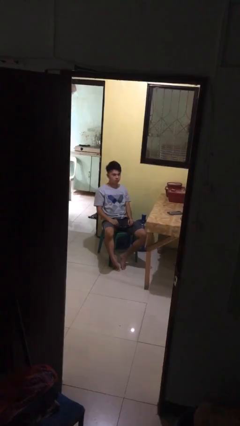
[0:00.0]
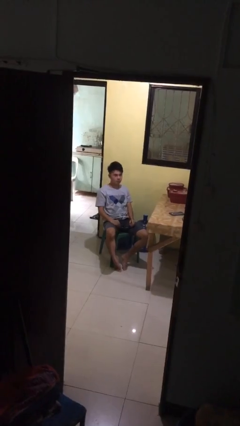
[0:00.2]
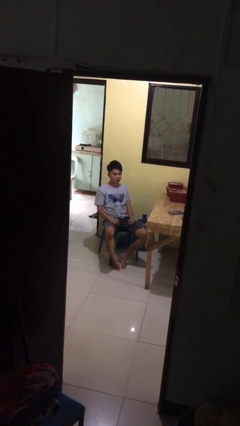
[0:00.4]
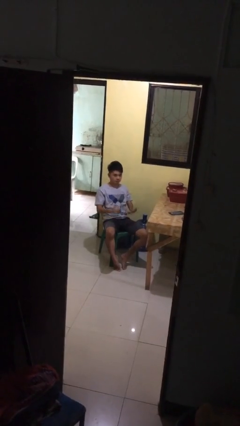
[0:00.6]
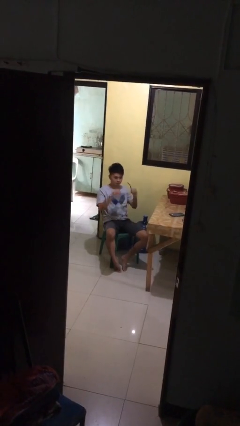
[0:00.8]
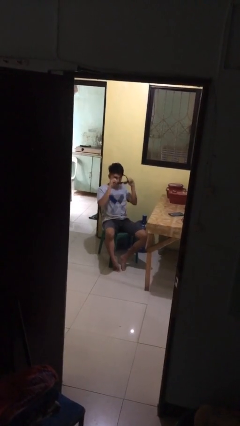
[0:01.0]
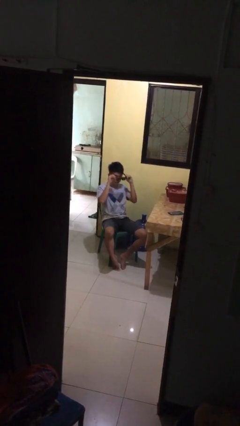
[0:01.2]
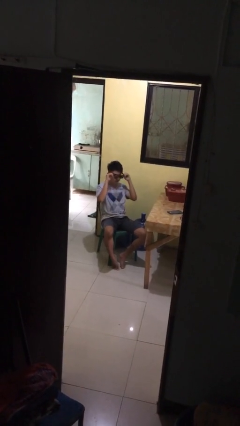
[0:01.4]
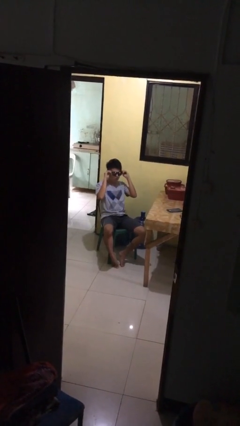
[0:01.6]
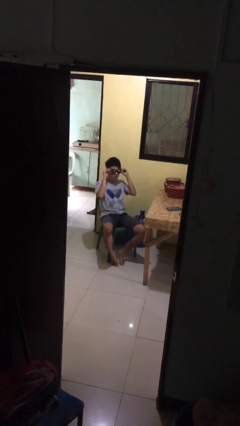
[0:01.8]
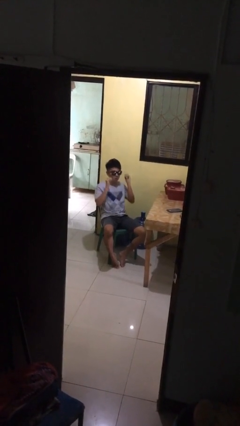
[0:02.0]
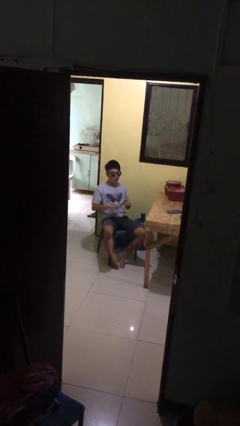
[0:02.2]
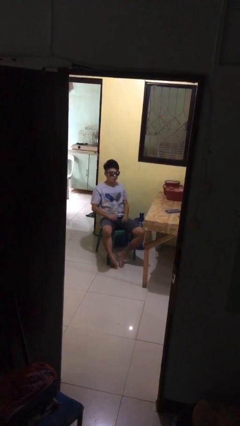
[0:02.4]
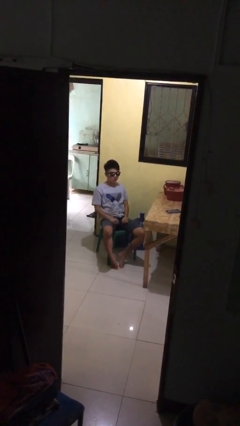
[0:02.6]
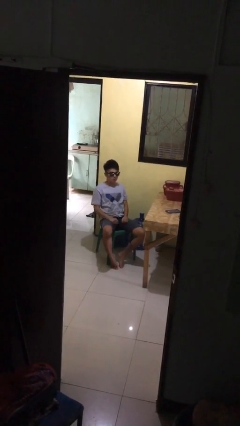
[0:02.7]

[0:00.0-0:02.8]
person puts on sunglasses

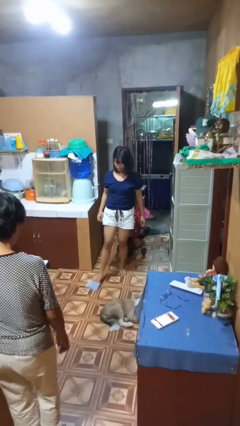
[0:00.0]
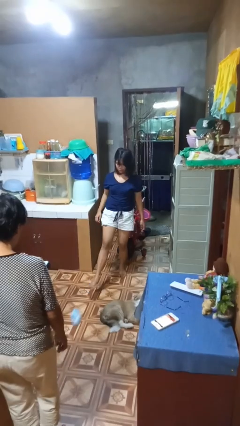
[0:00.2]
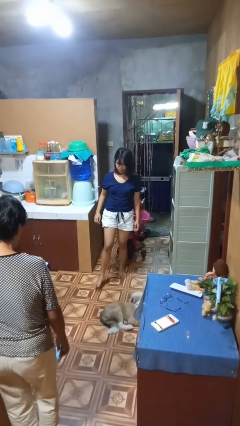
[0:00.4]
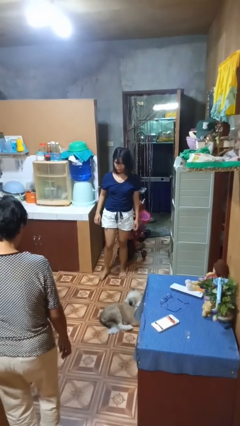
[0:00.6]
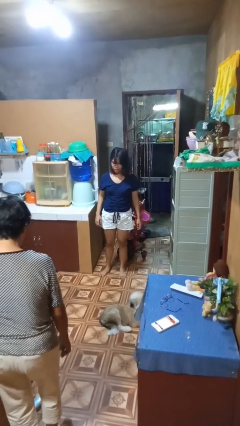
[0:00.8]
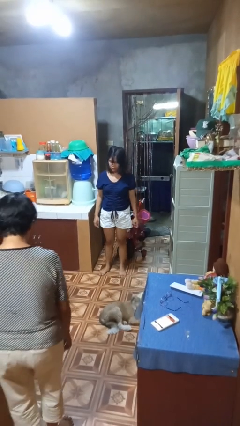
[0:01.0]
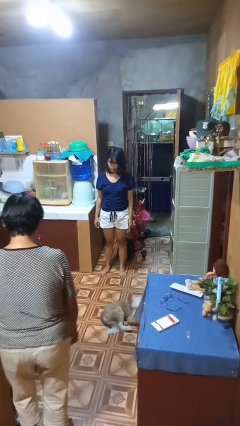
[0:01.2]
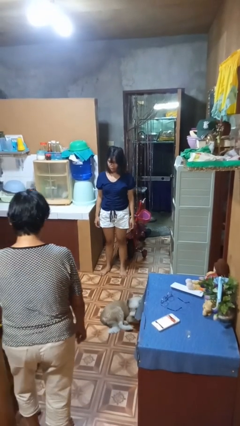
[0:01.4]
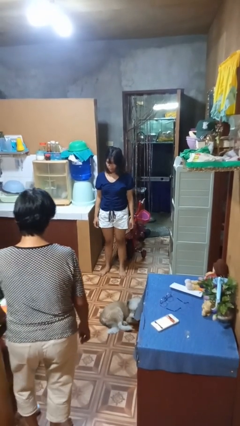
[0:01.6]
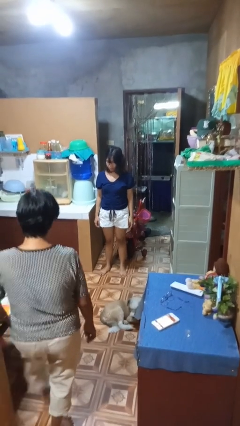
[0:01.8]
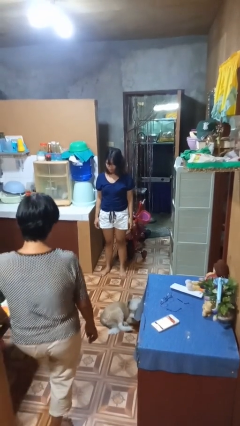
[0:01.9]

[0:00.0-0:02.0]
person kicks object to person

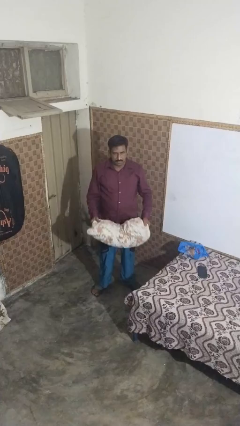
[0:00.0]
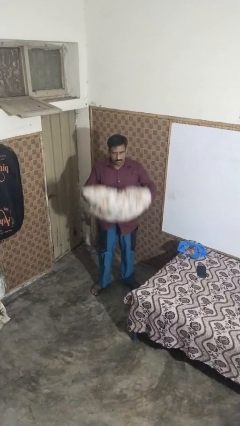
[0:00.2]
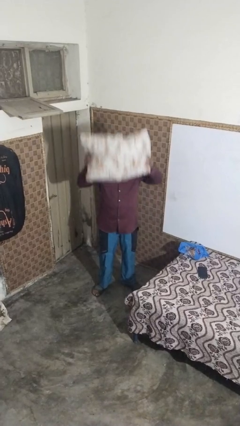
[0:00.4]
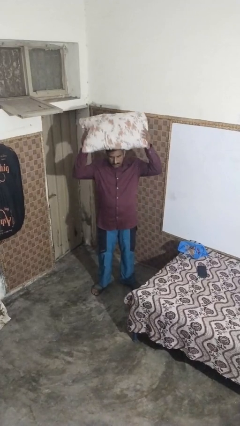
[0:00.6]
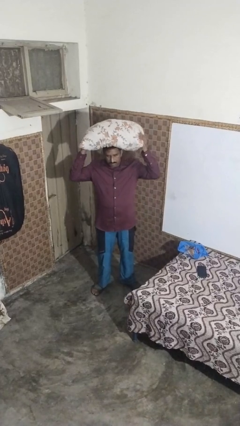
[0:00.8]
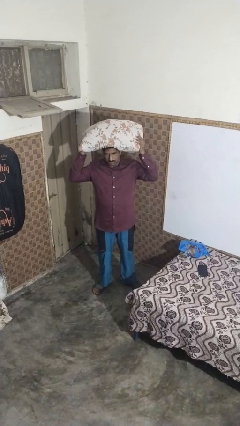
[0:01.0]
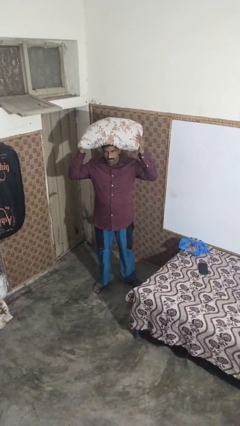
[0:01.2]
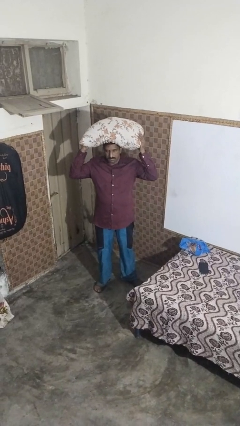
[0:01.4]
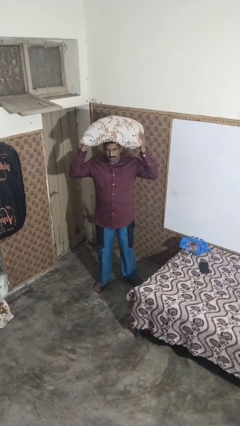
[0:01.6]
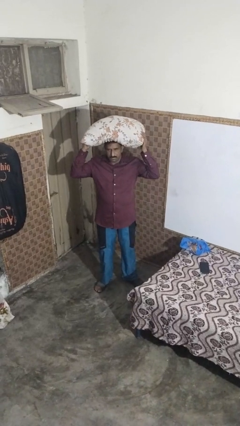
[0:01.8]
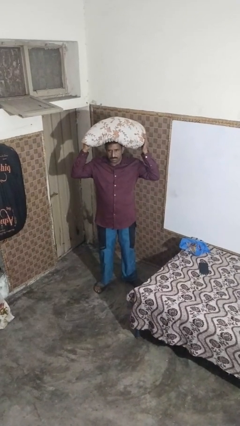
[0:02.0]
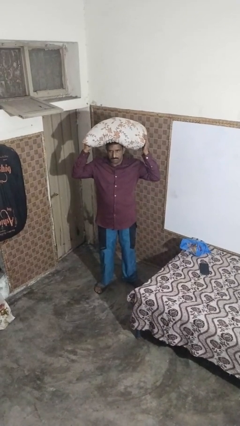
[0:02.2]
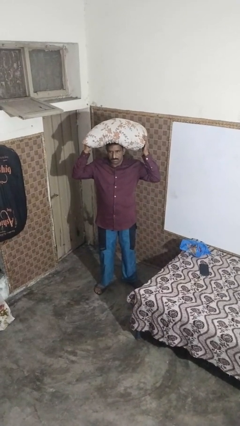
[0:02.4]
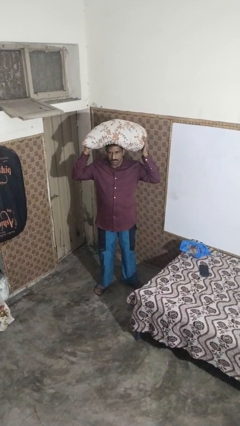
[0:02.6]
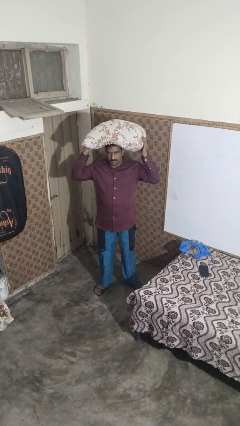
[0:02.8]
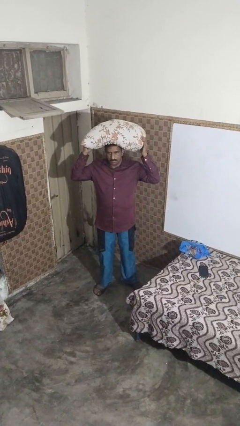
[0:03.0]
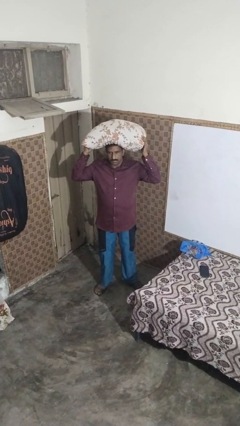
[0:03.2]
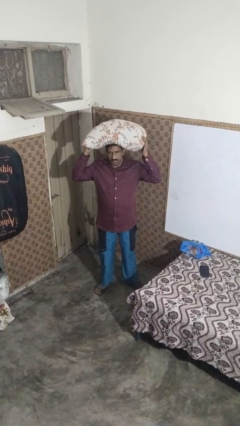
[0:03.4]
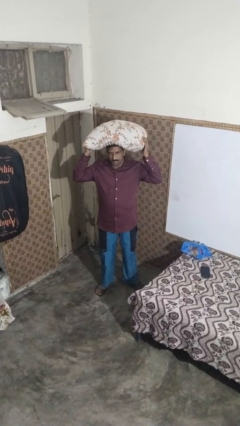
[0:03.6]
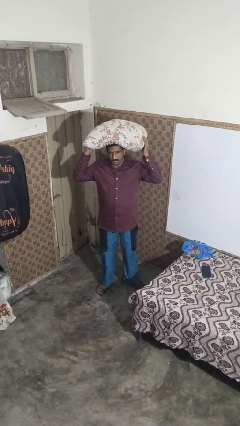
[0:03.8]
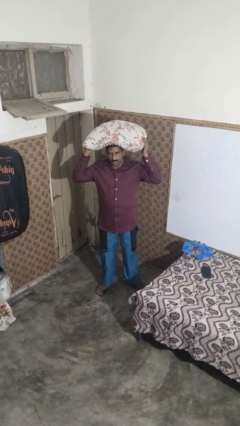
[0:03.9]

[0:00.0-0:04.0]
person holds object above head

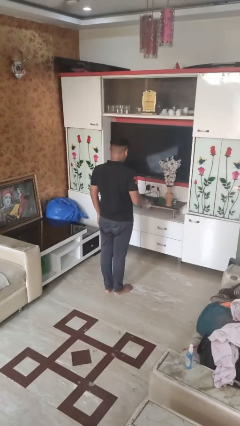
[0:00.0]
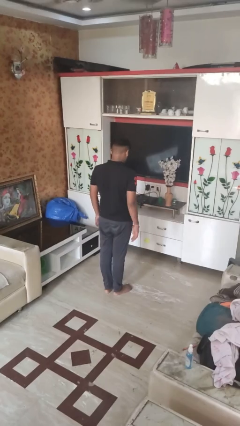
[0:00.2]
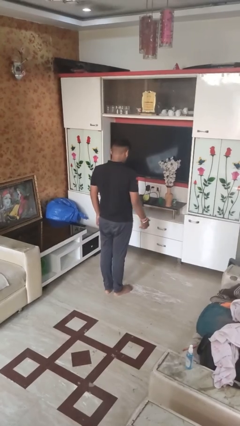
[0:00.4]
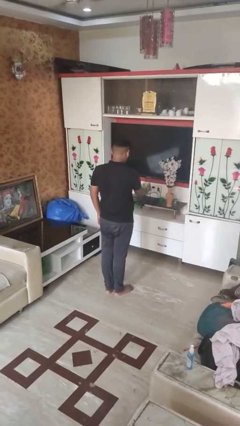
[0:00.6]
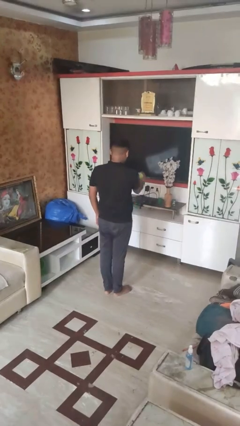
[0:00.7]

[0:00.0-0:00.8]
person bounces ball on floor

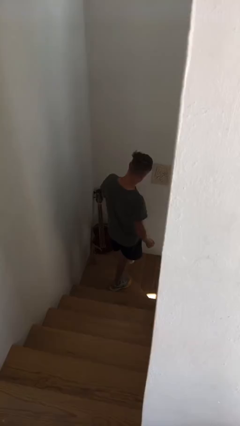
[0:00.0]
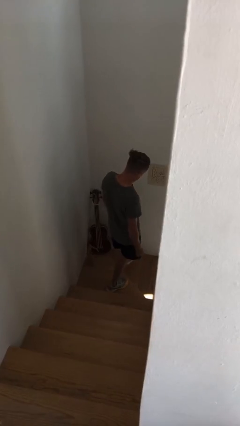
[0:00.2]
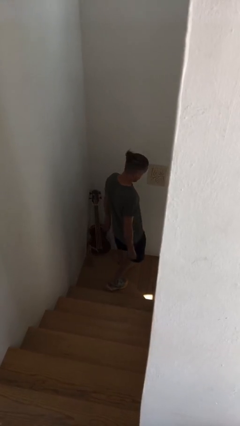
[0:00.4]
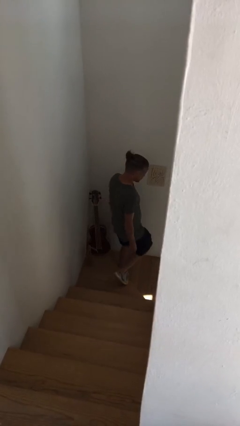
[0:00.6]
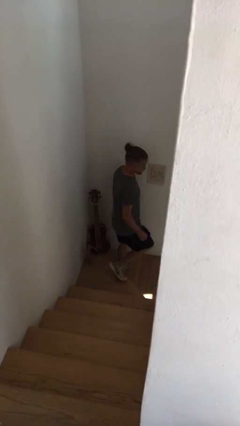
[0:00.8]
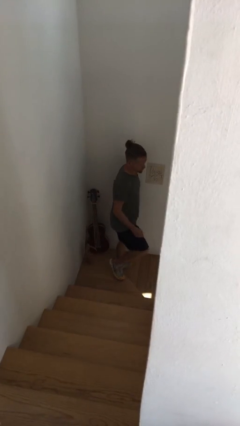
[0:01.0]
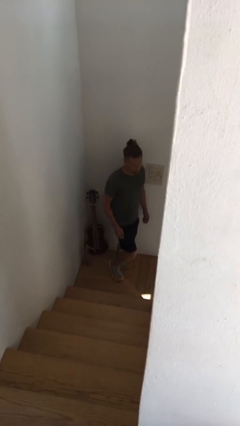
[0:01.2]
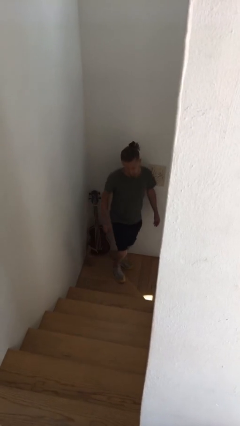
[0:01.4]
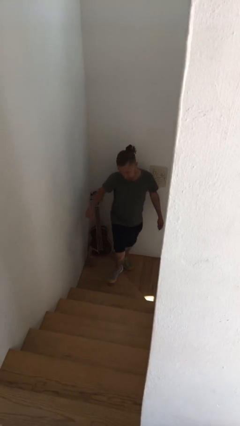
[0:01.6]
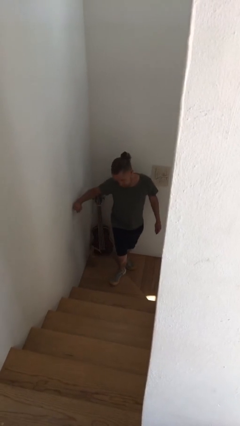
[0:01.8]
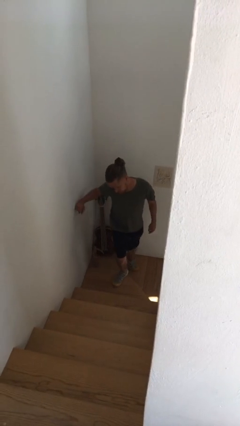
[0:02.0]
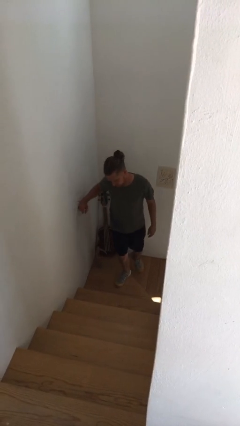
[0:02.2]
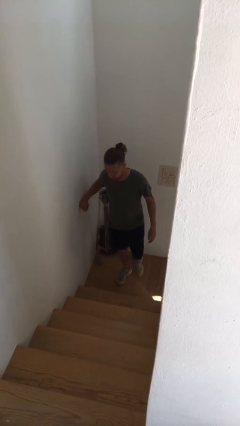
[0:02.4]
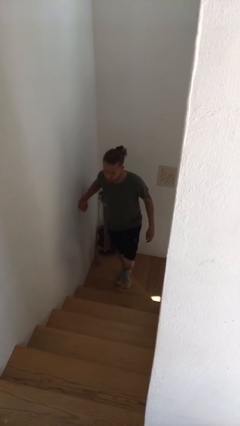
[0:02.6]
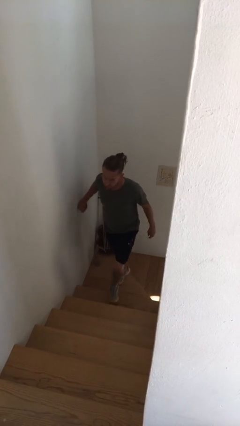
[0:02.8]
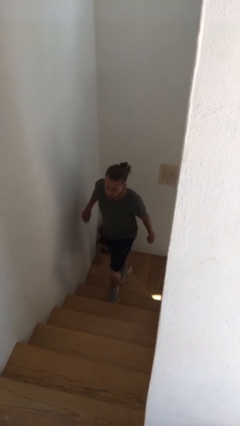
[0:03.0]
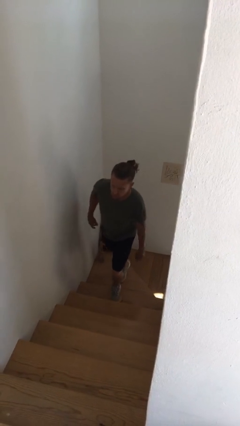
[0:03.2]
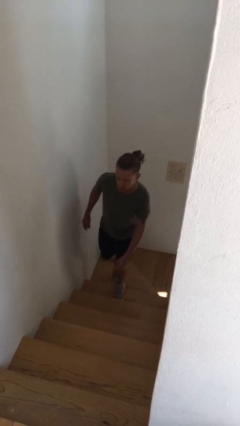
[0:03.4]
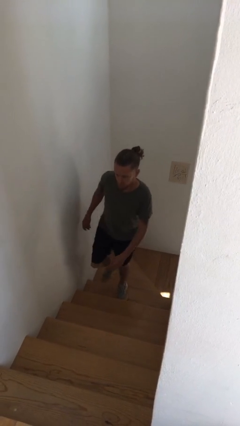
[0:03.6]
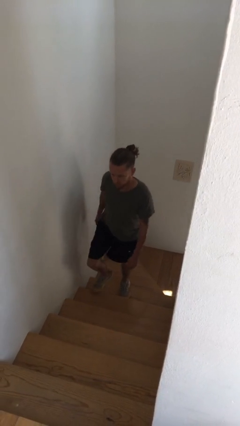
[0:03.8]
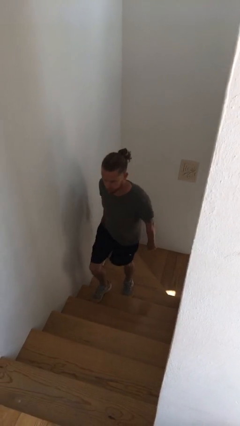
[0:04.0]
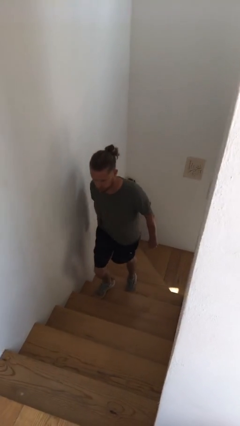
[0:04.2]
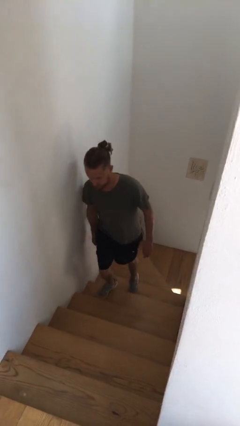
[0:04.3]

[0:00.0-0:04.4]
person climbs up stairs

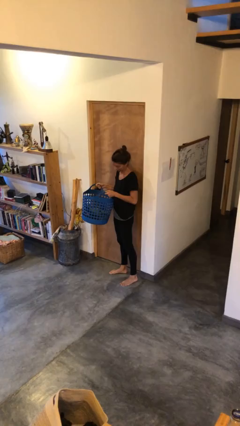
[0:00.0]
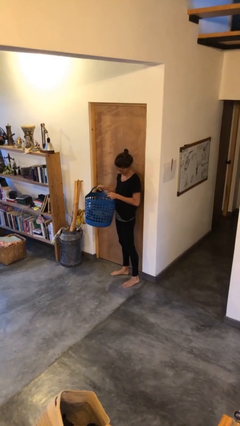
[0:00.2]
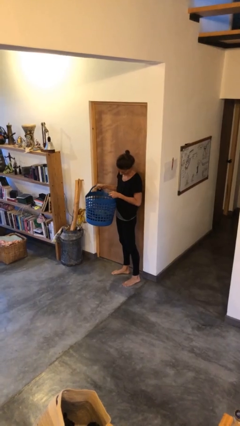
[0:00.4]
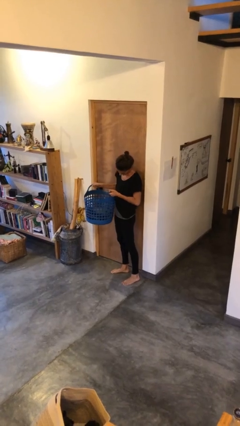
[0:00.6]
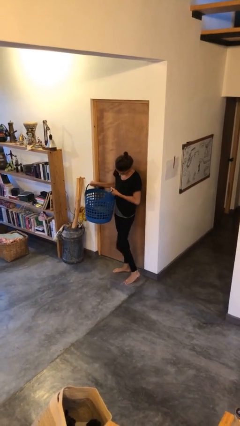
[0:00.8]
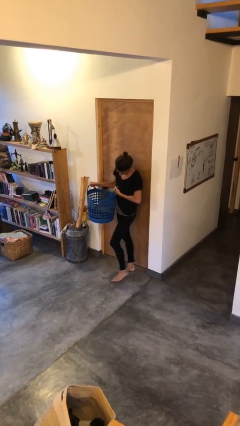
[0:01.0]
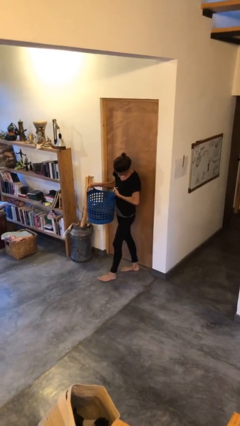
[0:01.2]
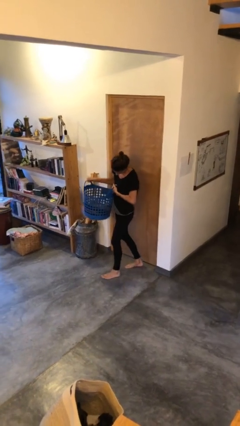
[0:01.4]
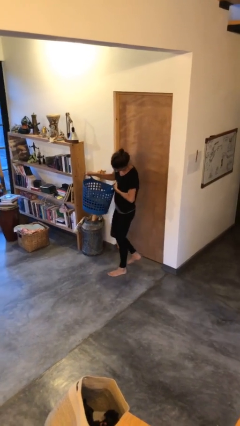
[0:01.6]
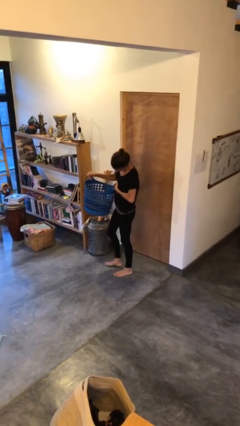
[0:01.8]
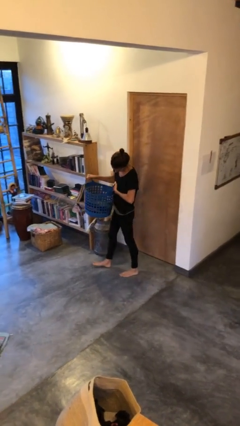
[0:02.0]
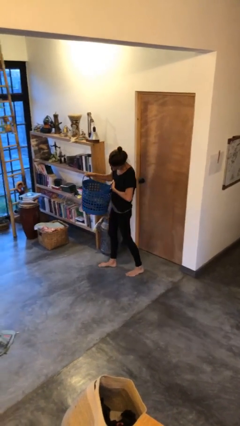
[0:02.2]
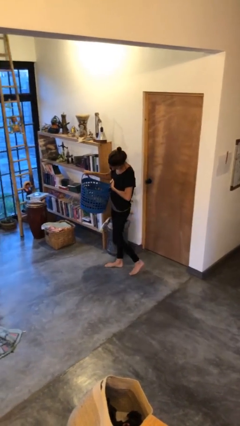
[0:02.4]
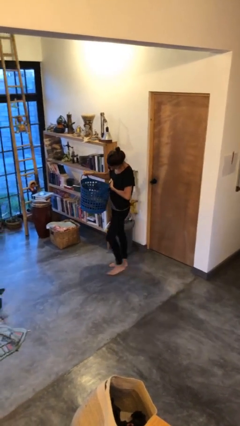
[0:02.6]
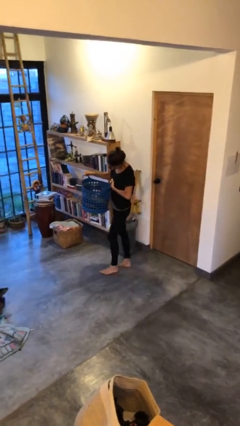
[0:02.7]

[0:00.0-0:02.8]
person carries laundry basket

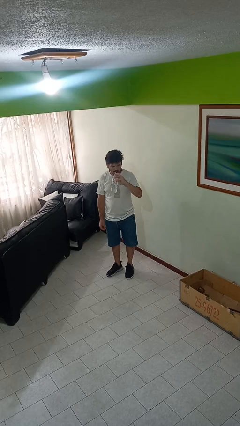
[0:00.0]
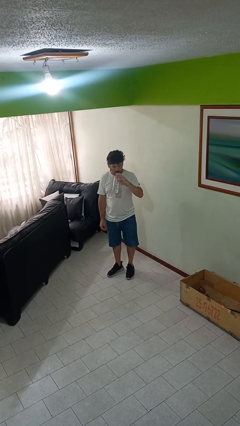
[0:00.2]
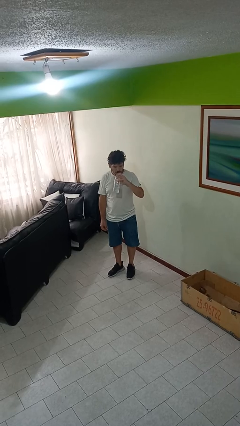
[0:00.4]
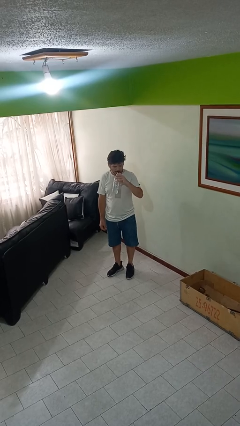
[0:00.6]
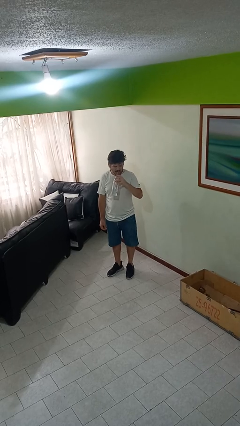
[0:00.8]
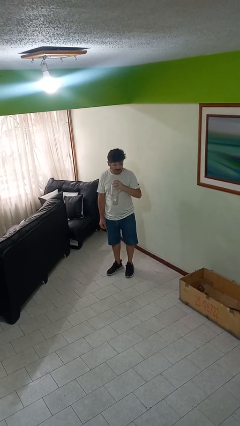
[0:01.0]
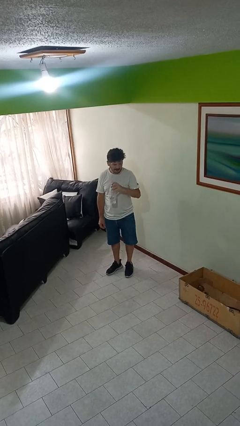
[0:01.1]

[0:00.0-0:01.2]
person drinks from straw
